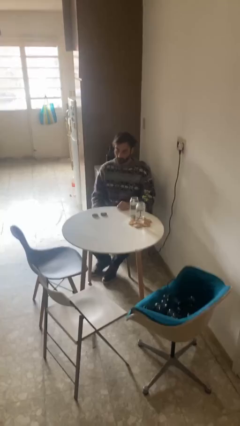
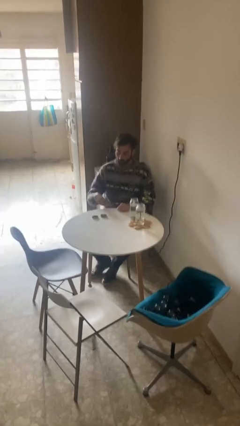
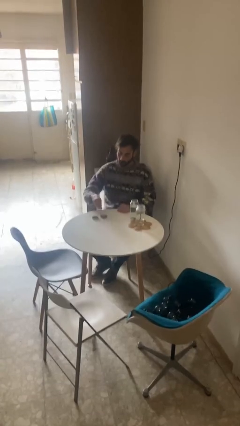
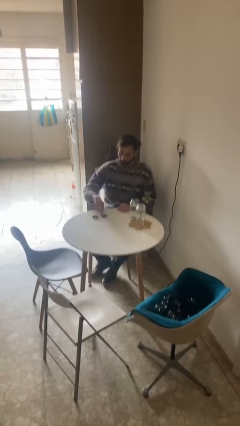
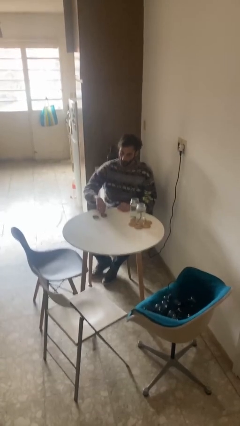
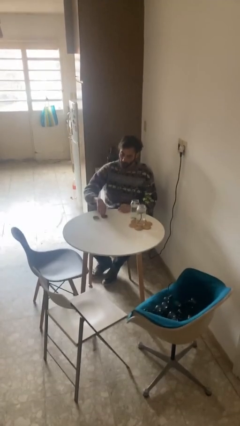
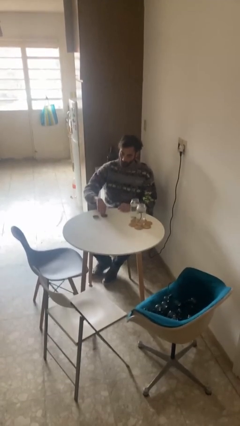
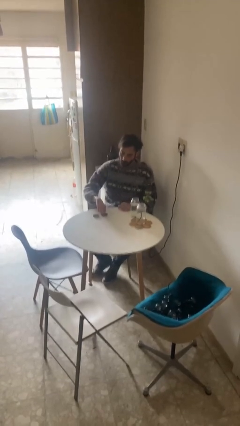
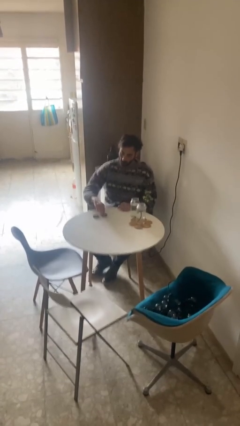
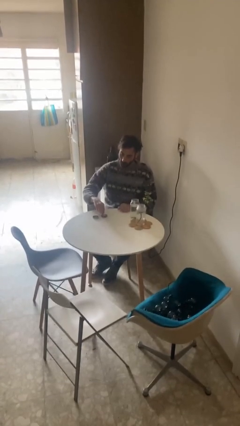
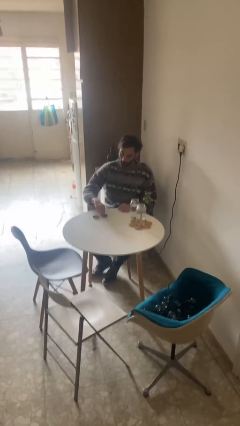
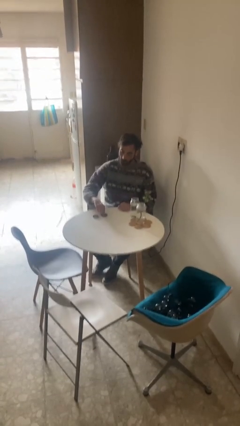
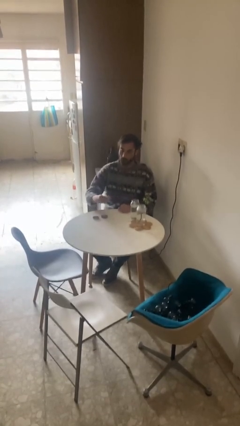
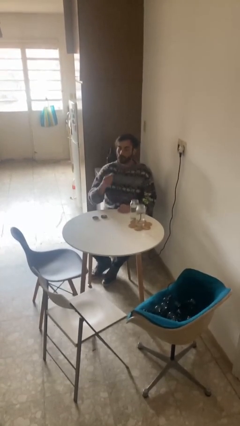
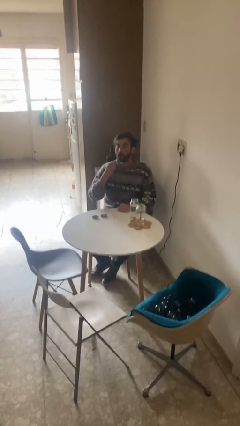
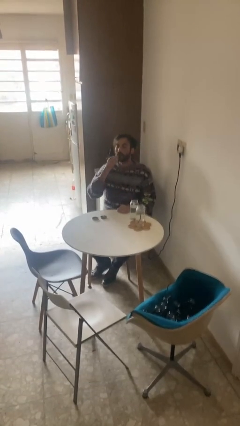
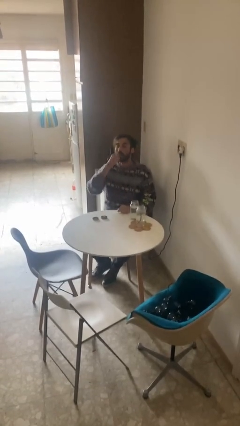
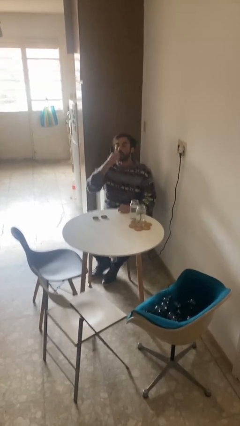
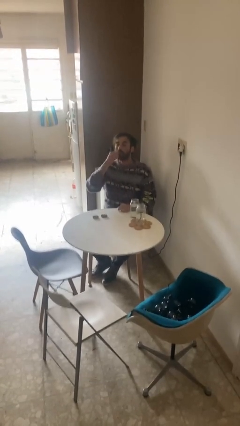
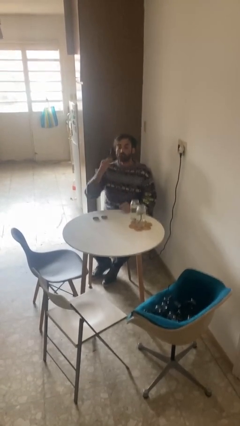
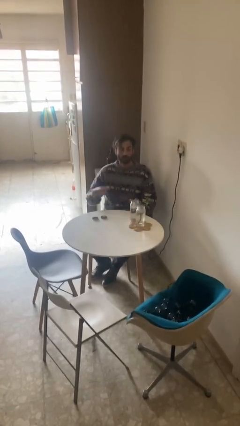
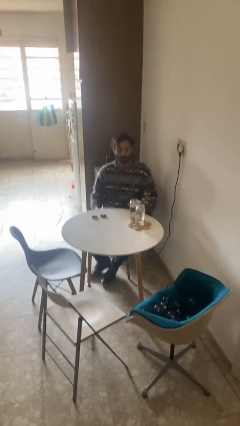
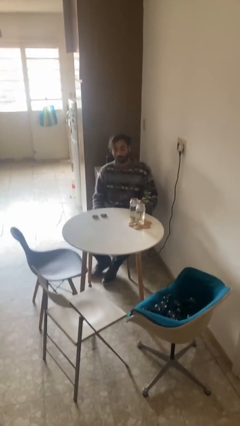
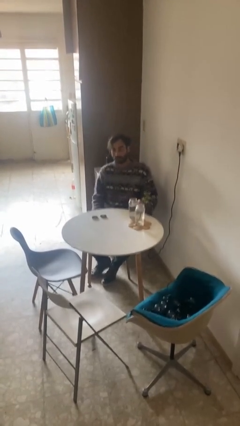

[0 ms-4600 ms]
person takes medicine pills

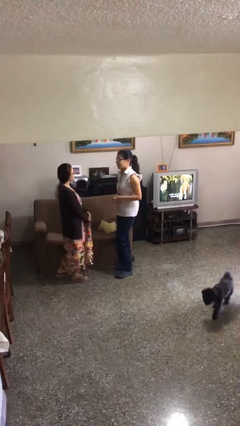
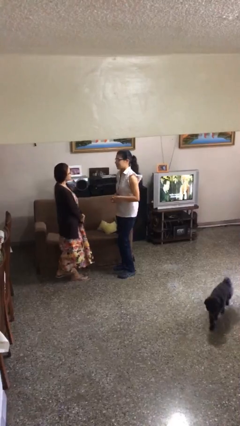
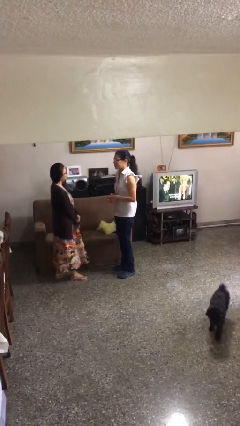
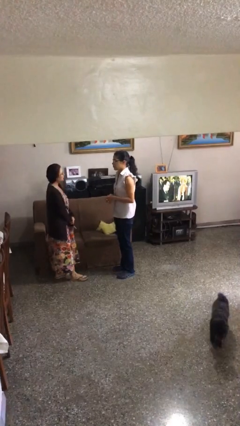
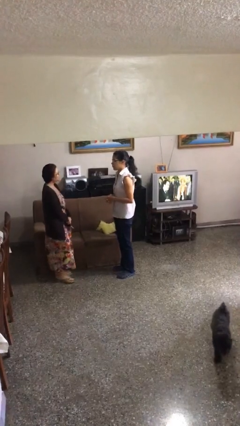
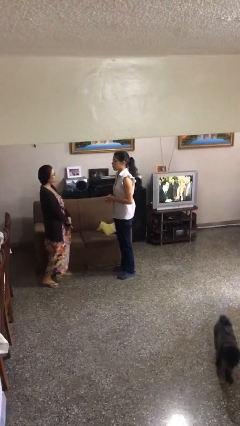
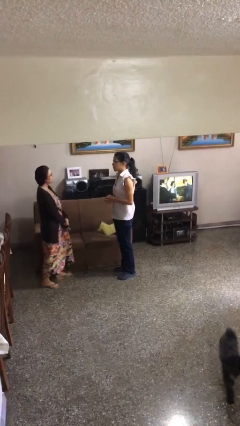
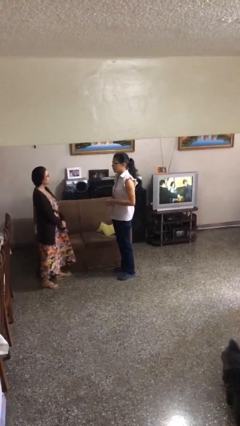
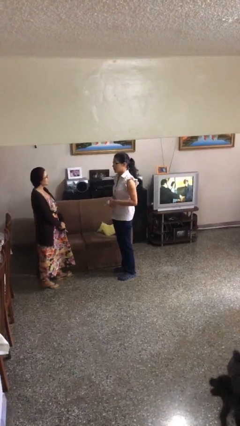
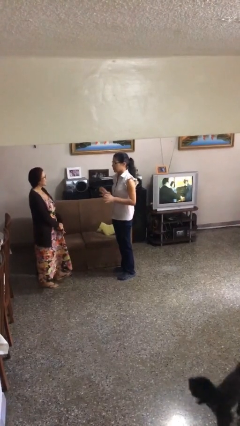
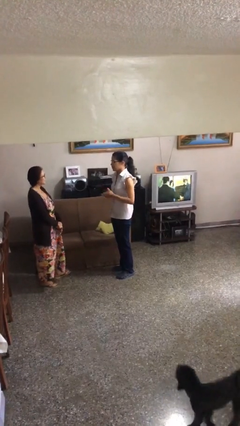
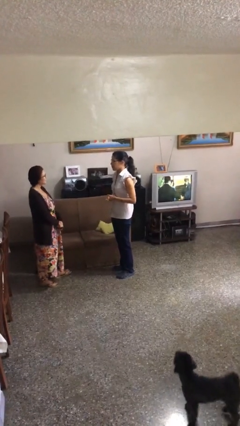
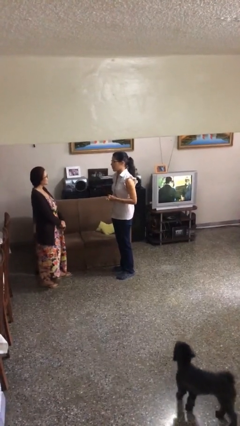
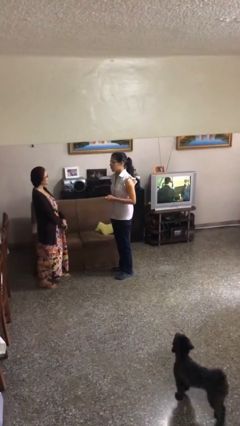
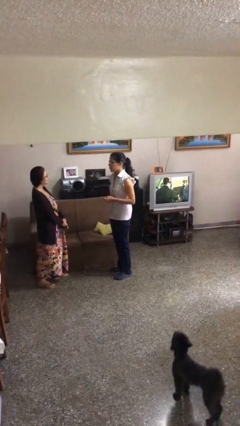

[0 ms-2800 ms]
person talks to person

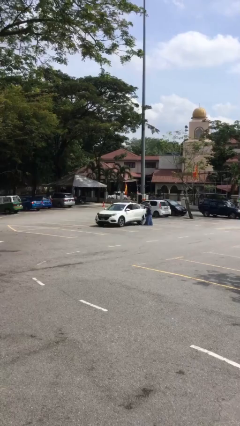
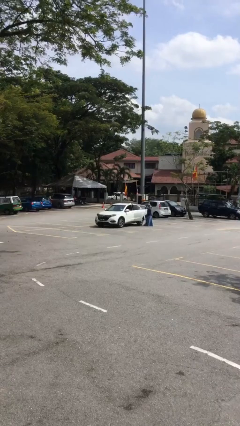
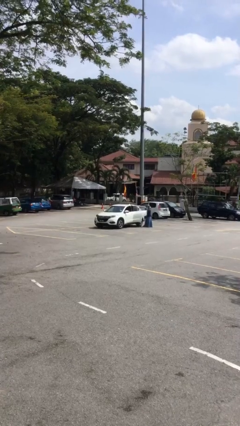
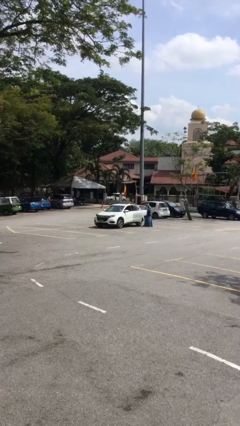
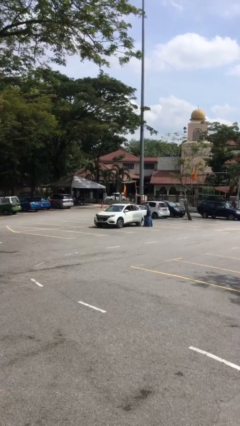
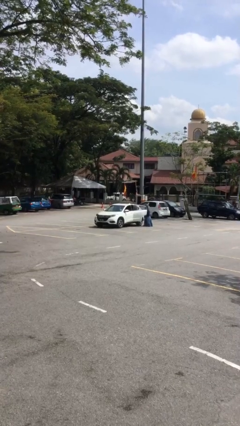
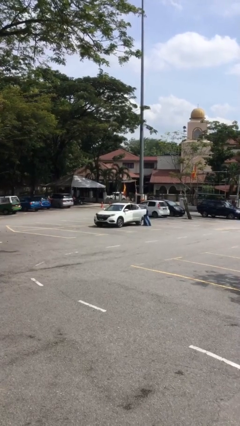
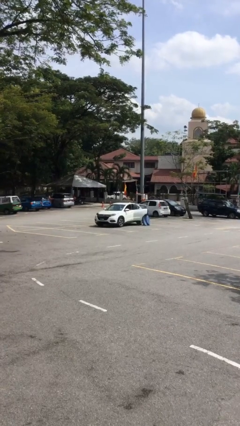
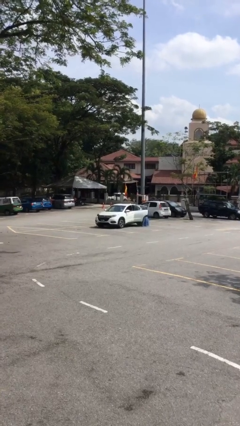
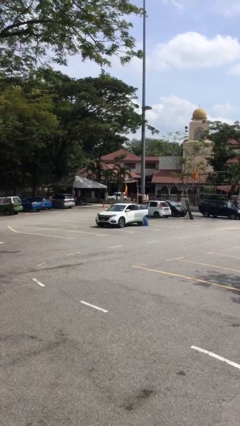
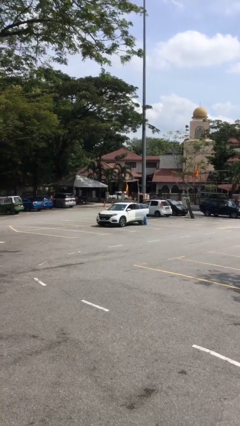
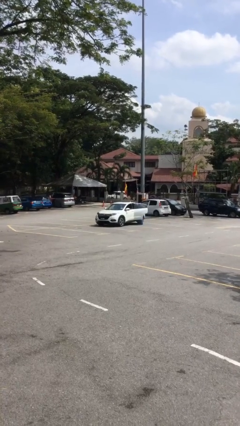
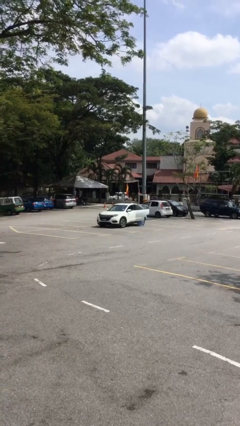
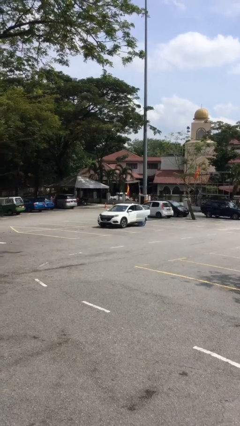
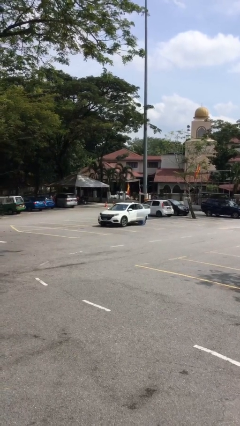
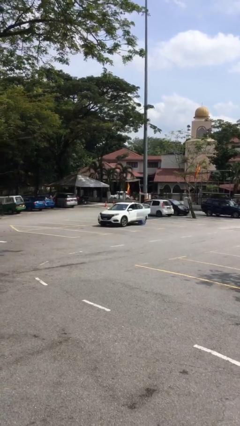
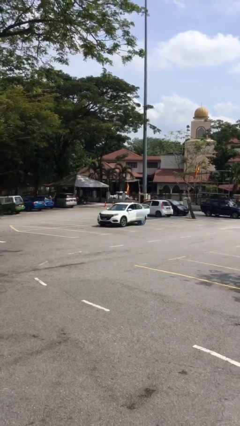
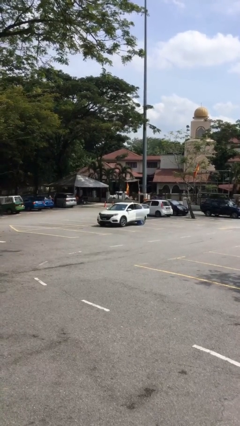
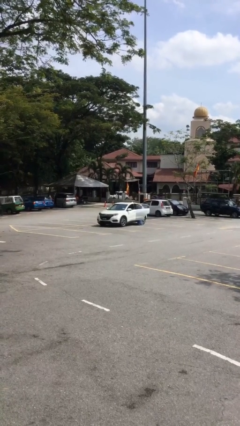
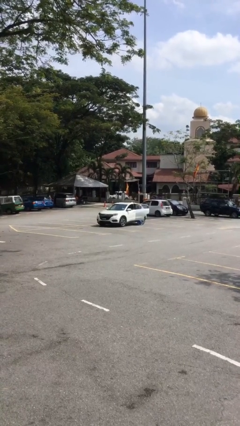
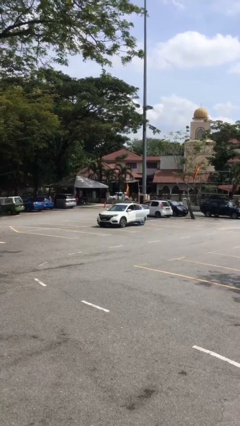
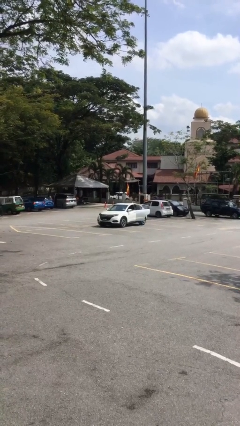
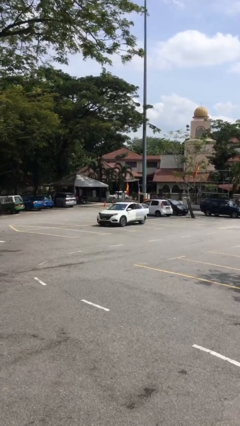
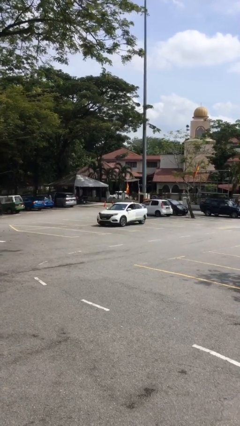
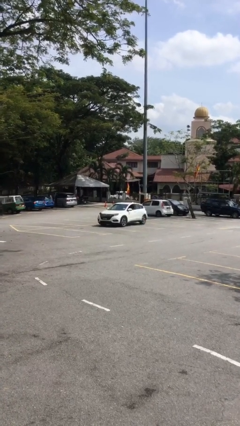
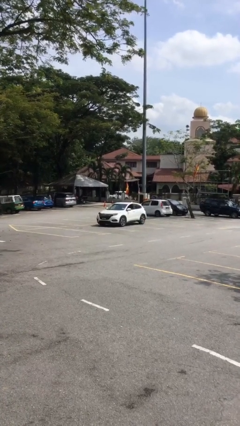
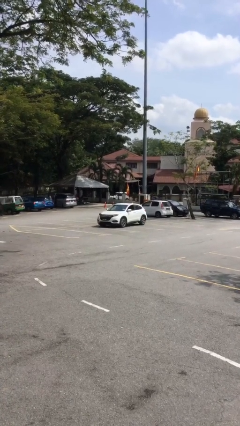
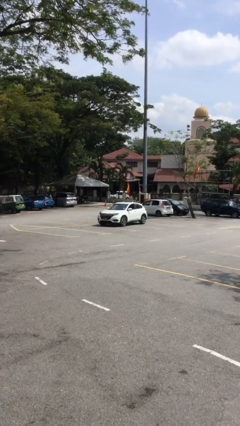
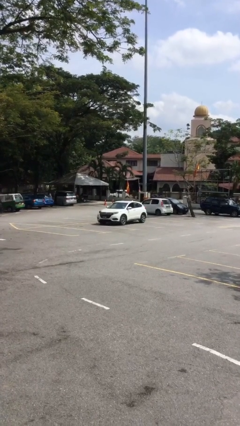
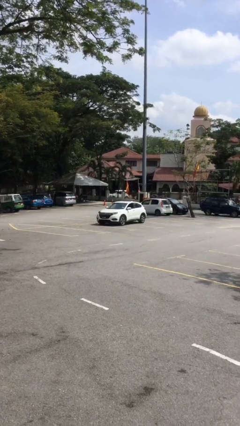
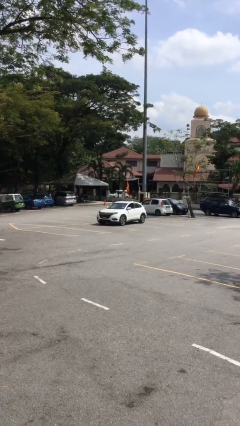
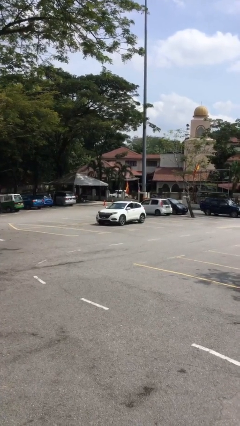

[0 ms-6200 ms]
car picks up person

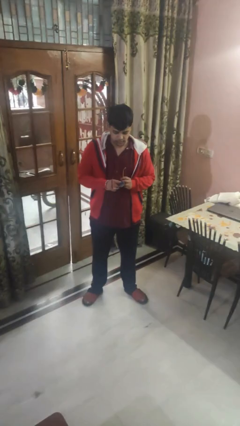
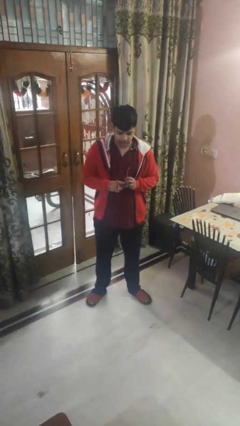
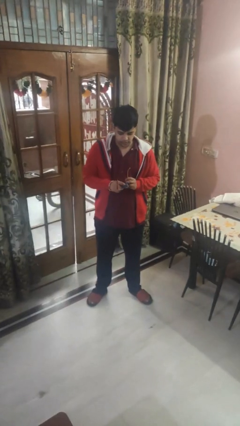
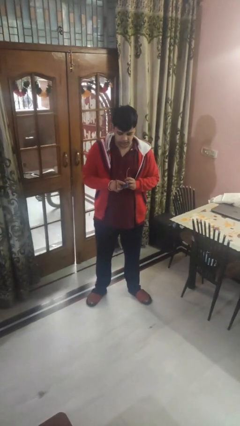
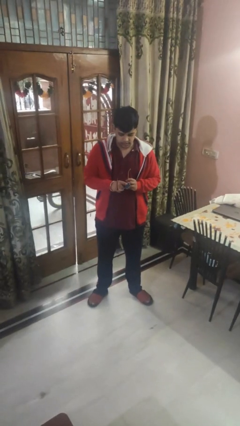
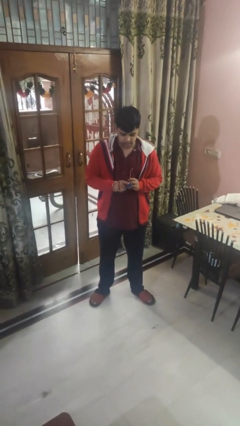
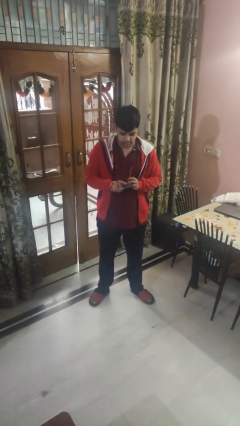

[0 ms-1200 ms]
person cleans eyeglasses

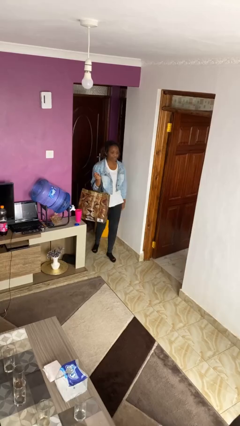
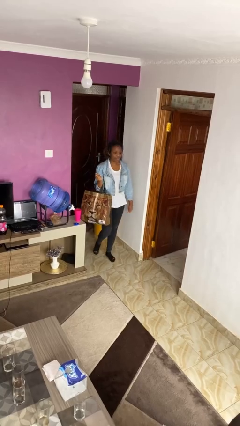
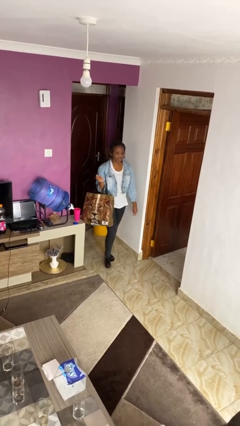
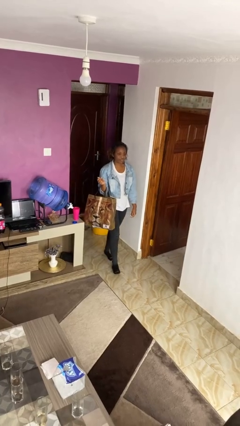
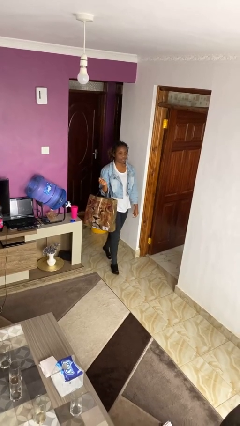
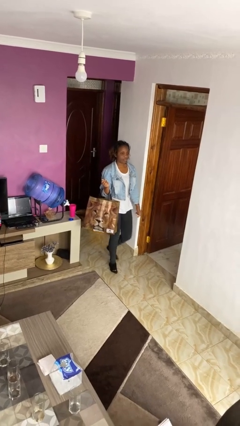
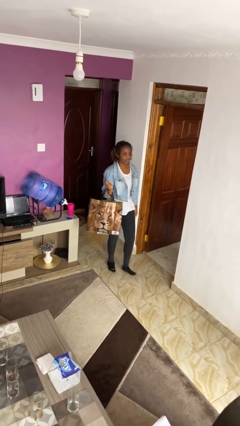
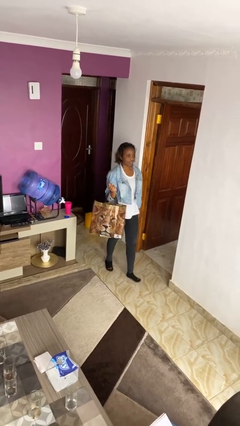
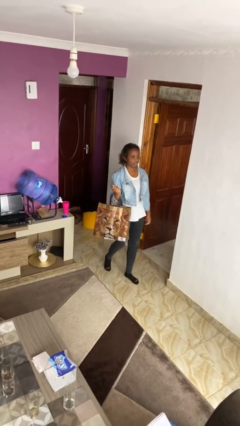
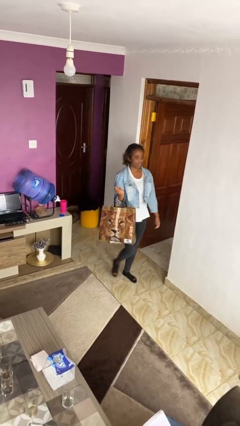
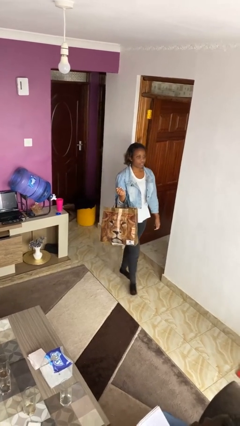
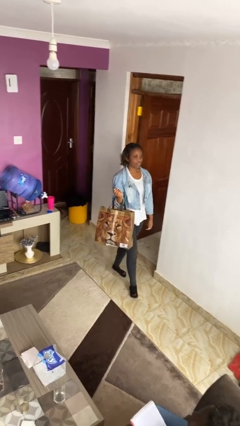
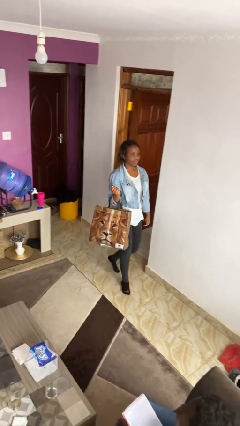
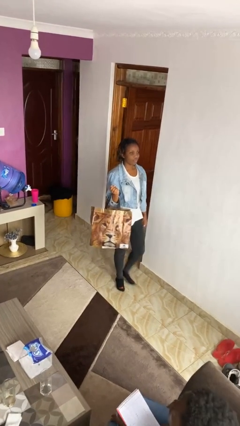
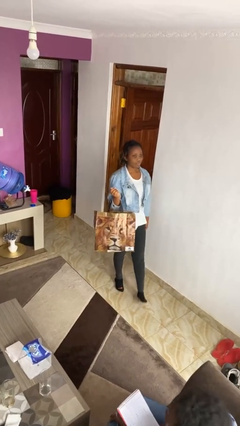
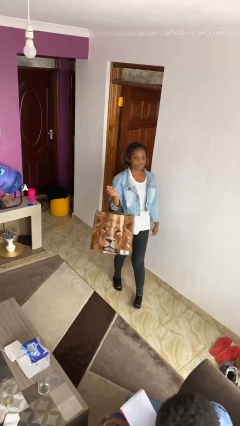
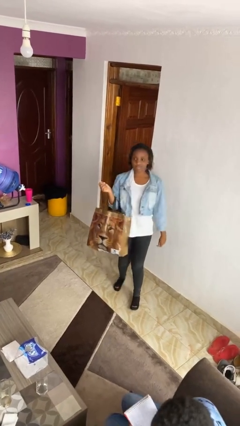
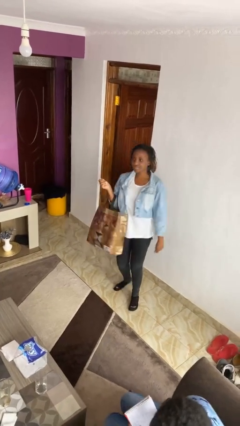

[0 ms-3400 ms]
person carries groceries
